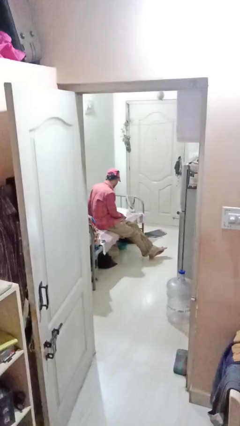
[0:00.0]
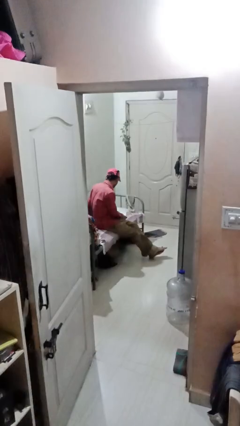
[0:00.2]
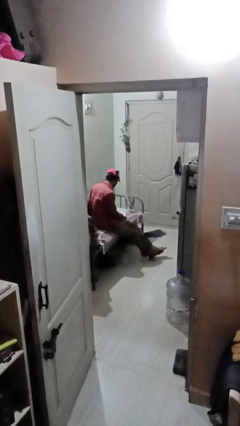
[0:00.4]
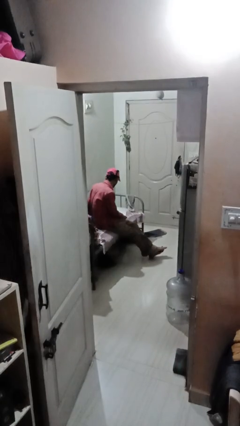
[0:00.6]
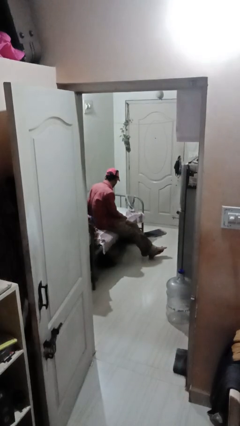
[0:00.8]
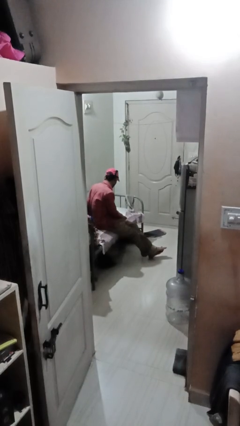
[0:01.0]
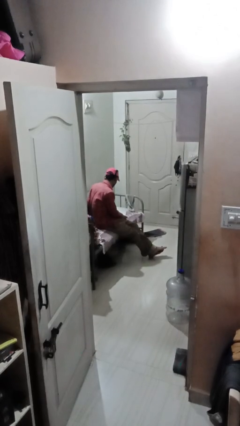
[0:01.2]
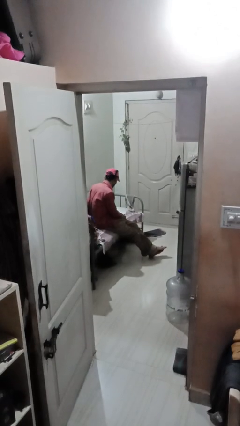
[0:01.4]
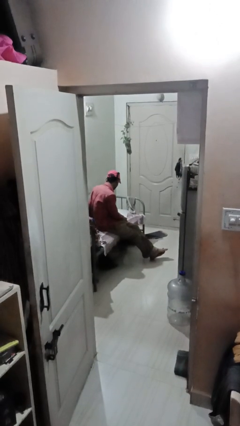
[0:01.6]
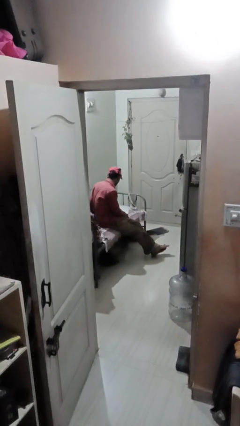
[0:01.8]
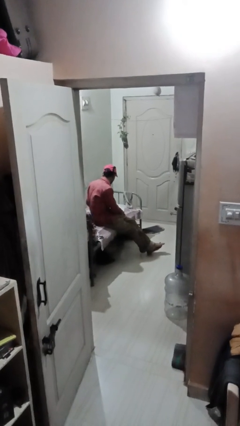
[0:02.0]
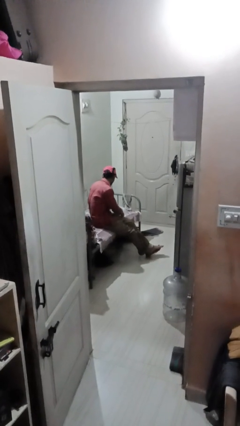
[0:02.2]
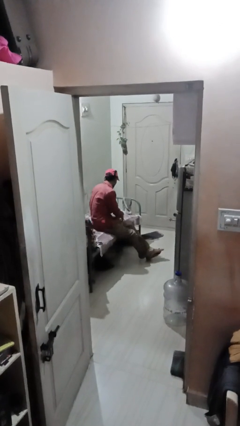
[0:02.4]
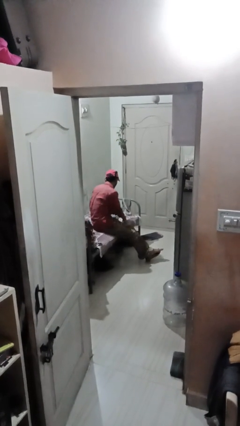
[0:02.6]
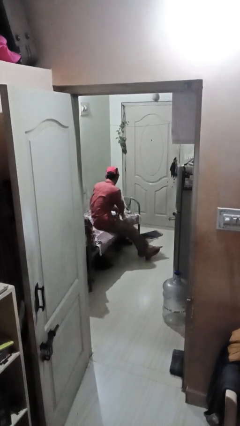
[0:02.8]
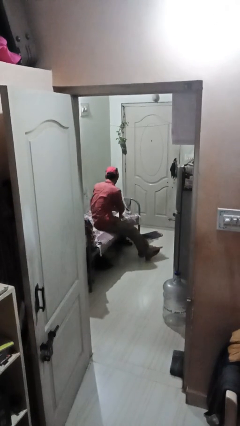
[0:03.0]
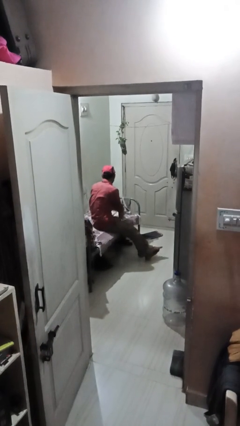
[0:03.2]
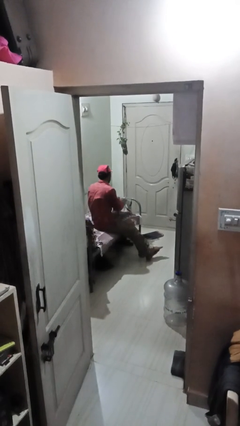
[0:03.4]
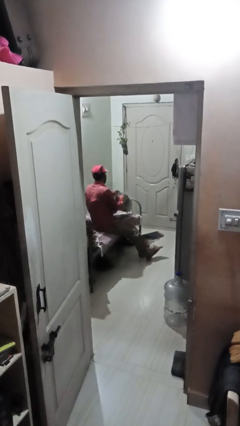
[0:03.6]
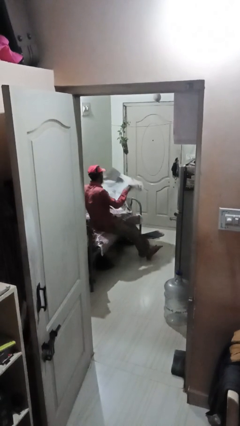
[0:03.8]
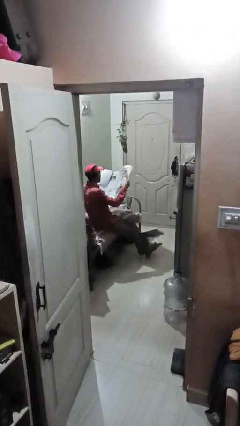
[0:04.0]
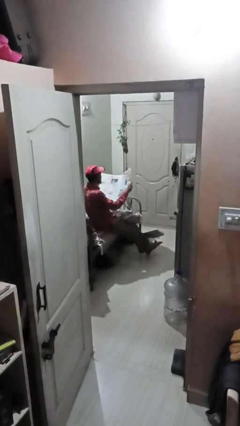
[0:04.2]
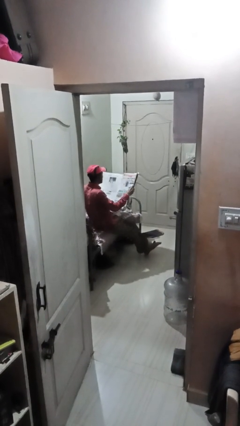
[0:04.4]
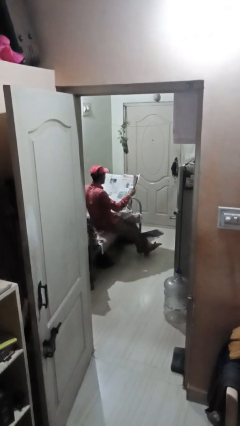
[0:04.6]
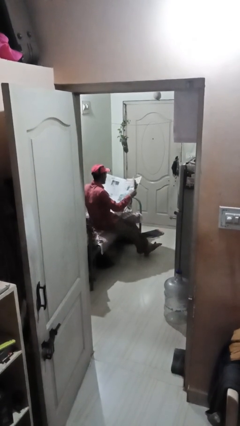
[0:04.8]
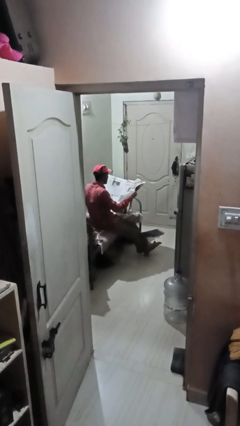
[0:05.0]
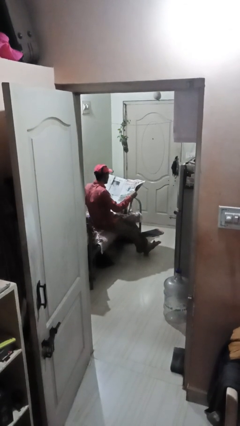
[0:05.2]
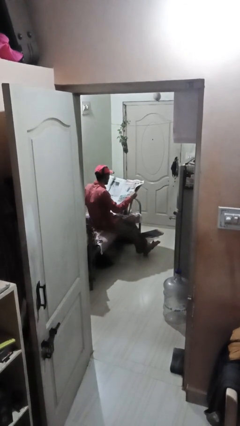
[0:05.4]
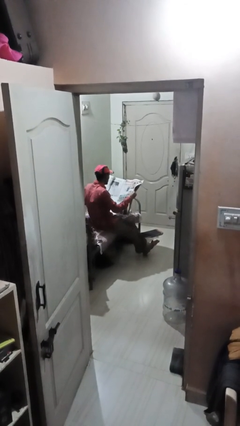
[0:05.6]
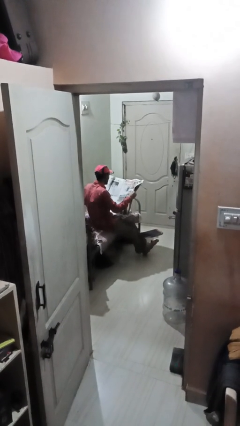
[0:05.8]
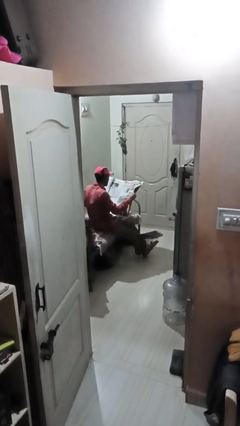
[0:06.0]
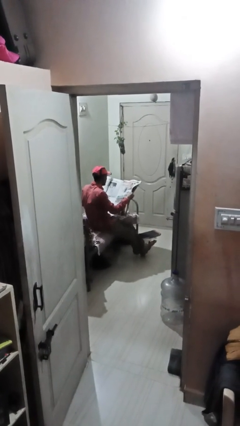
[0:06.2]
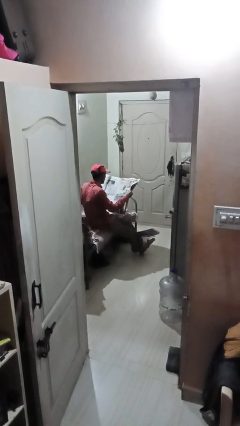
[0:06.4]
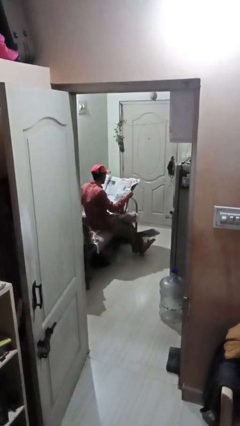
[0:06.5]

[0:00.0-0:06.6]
person reads newspaper

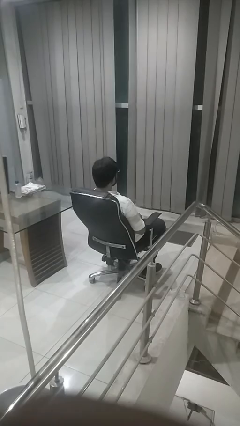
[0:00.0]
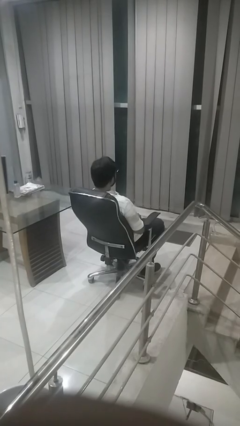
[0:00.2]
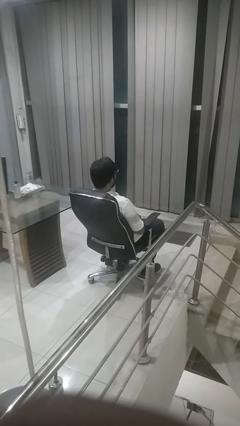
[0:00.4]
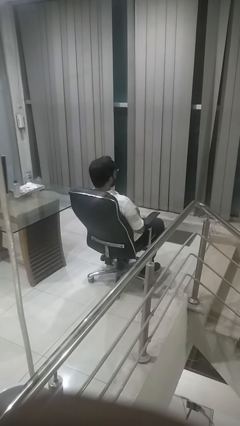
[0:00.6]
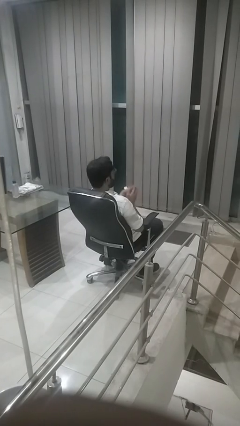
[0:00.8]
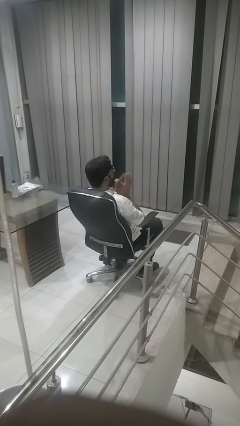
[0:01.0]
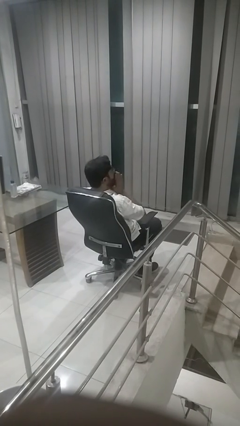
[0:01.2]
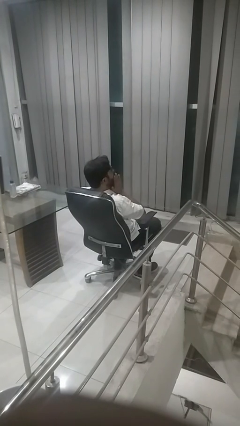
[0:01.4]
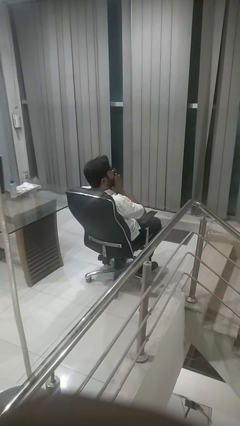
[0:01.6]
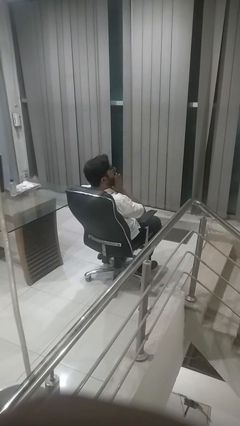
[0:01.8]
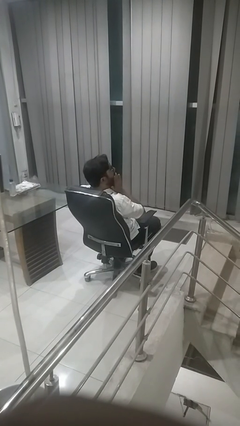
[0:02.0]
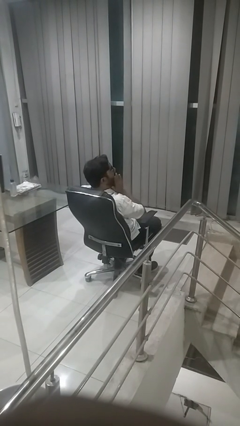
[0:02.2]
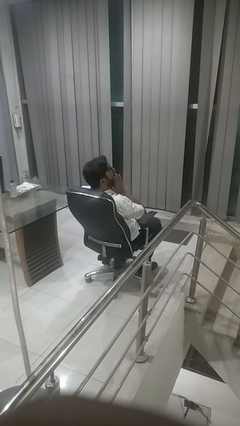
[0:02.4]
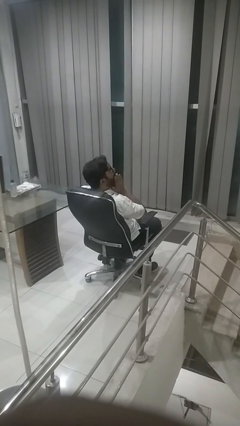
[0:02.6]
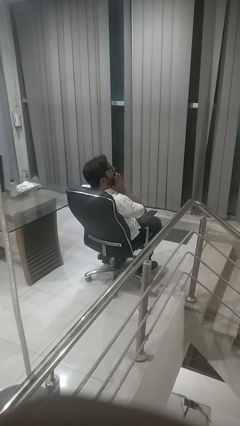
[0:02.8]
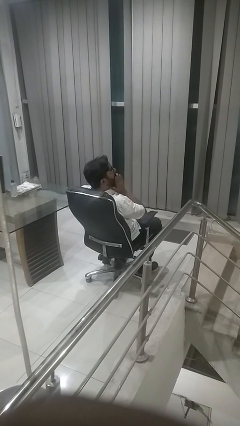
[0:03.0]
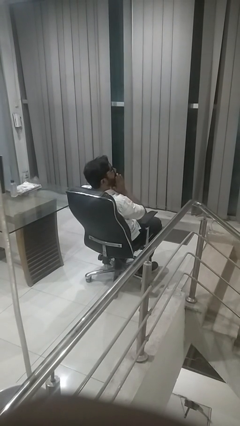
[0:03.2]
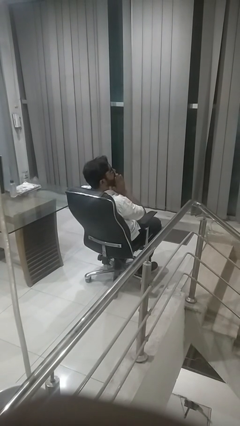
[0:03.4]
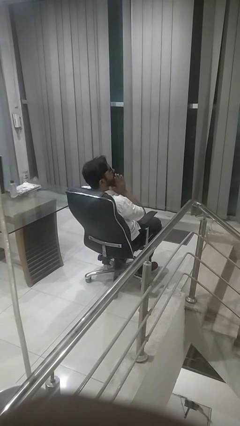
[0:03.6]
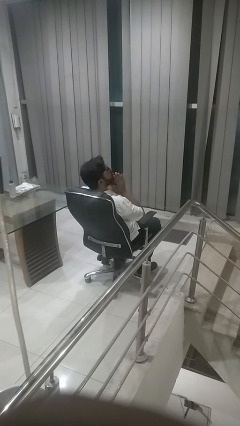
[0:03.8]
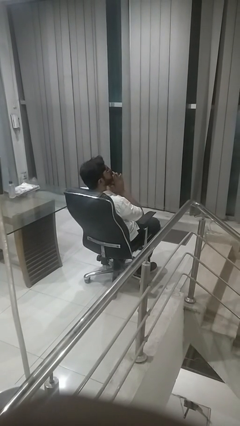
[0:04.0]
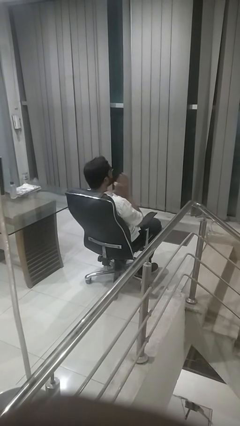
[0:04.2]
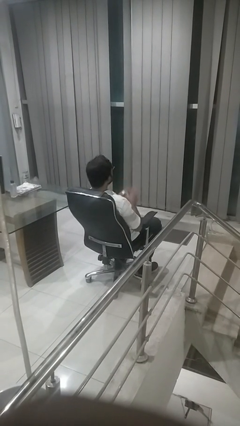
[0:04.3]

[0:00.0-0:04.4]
person yawns

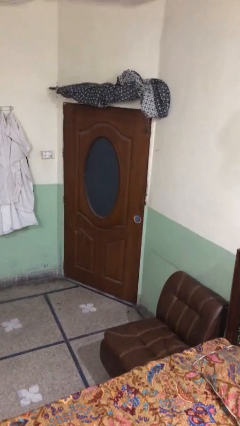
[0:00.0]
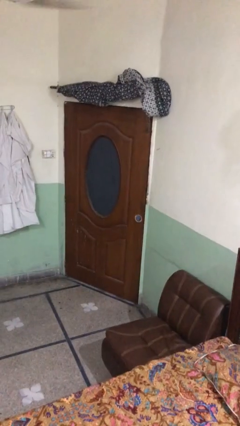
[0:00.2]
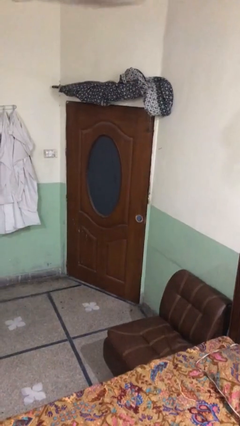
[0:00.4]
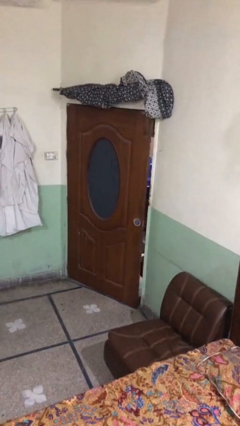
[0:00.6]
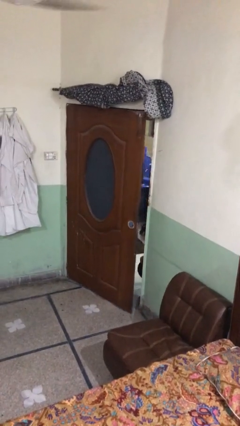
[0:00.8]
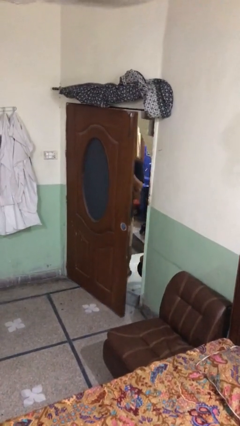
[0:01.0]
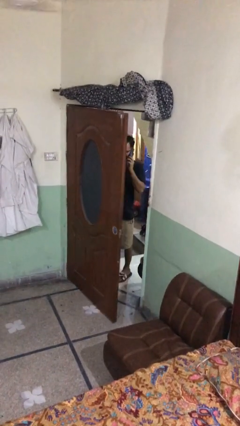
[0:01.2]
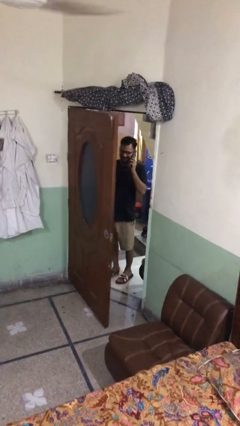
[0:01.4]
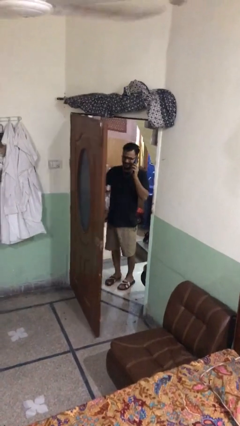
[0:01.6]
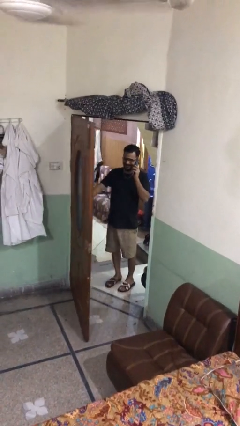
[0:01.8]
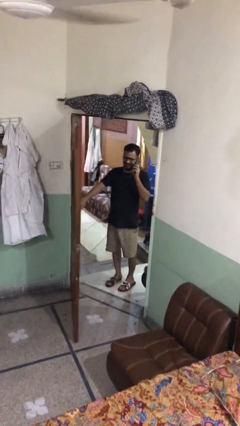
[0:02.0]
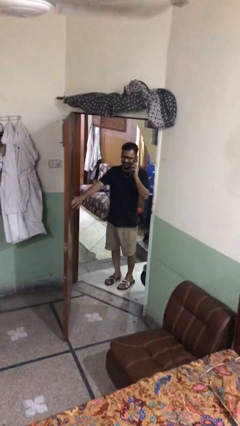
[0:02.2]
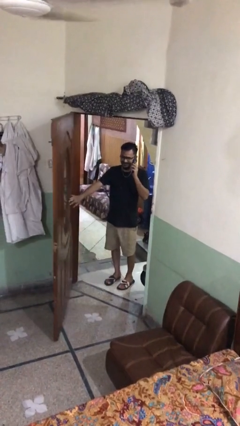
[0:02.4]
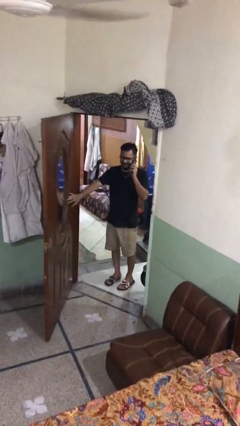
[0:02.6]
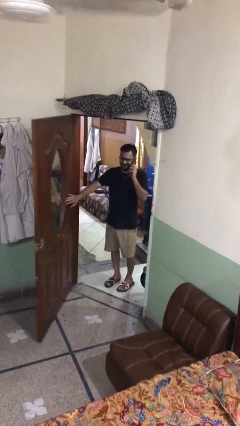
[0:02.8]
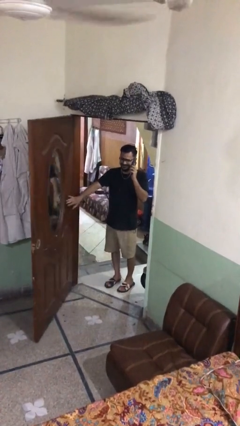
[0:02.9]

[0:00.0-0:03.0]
person opens facility door

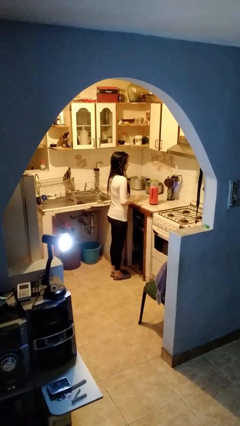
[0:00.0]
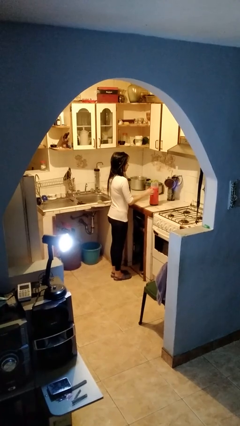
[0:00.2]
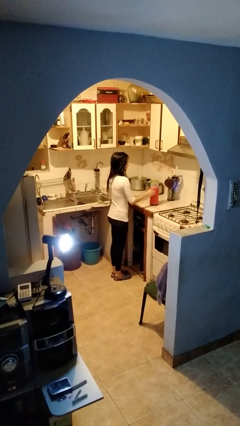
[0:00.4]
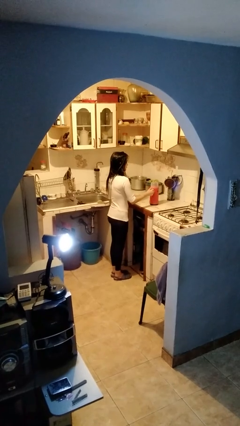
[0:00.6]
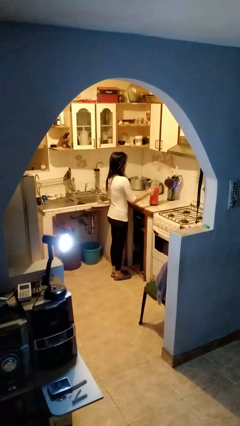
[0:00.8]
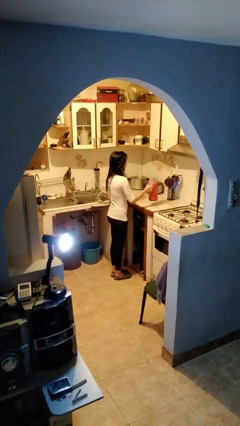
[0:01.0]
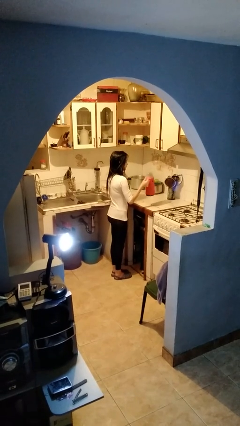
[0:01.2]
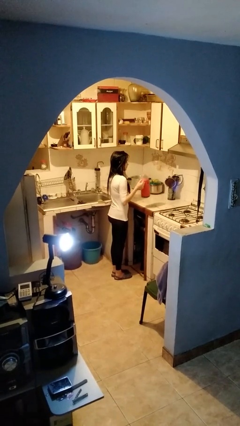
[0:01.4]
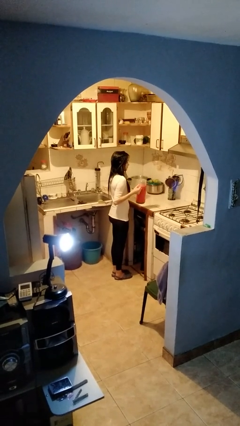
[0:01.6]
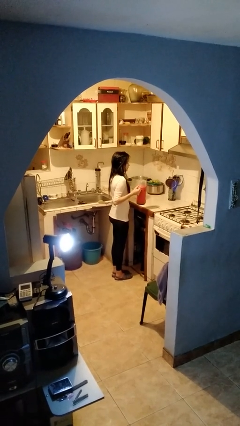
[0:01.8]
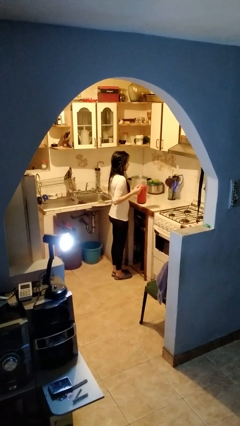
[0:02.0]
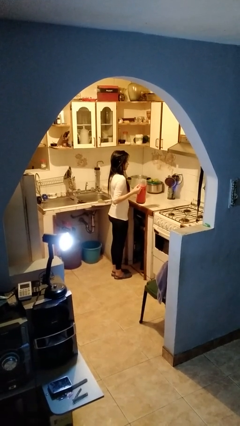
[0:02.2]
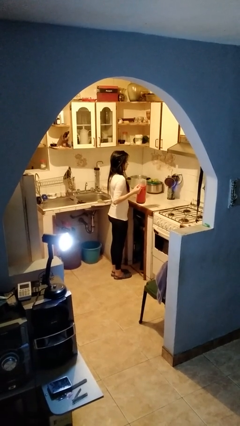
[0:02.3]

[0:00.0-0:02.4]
person picks up object from countertop

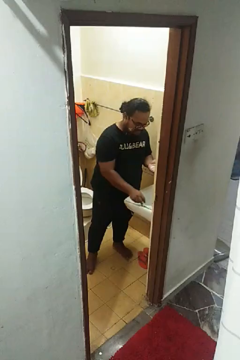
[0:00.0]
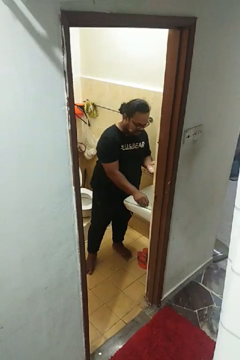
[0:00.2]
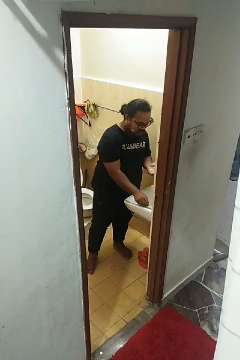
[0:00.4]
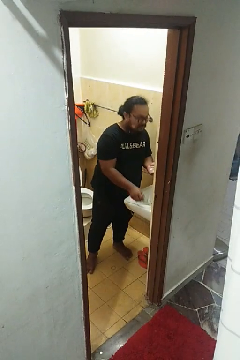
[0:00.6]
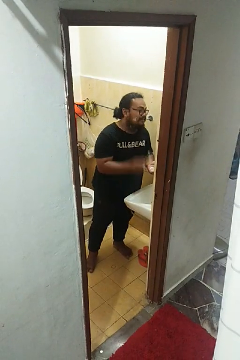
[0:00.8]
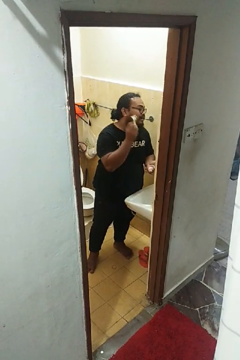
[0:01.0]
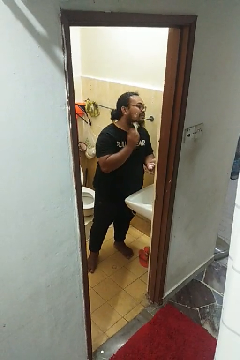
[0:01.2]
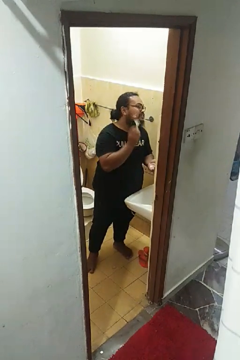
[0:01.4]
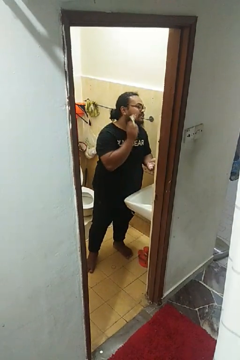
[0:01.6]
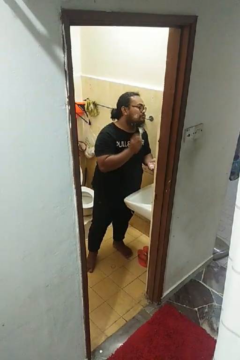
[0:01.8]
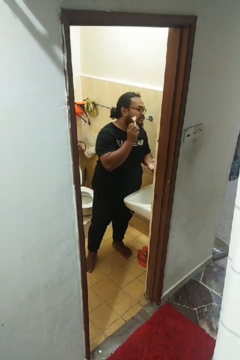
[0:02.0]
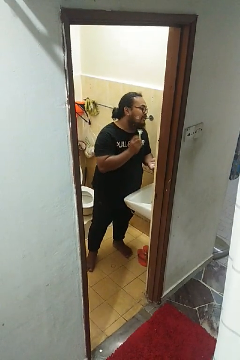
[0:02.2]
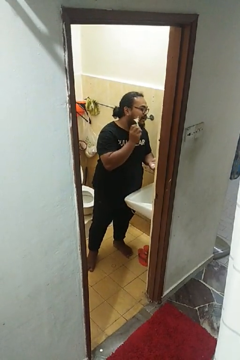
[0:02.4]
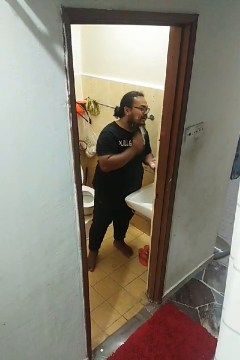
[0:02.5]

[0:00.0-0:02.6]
person shaves face
